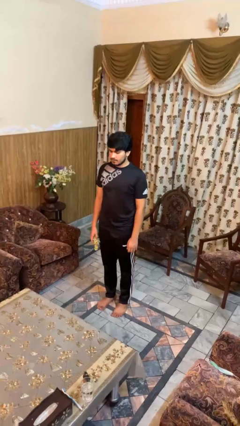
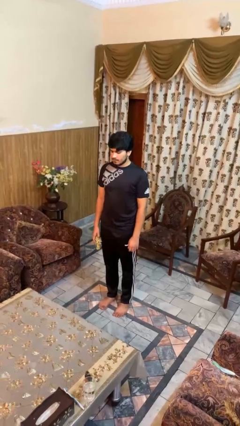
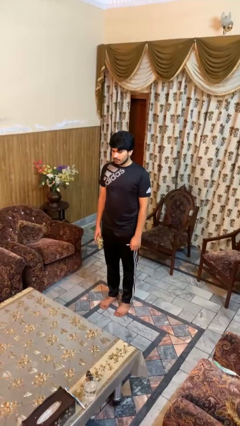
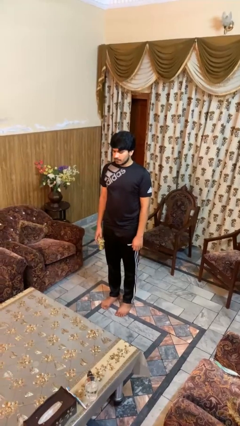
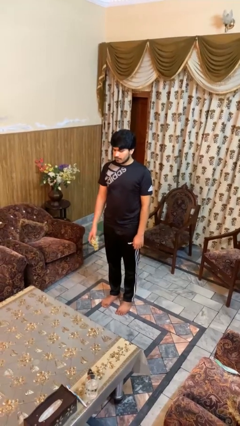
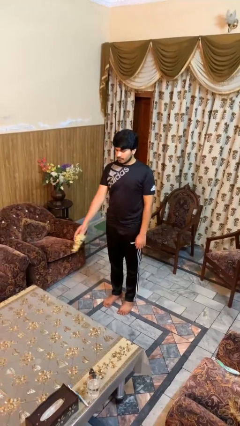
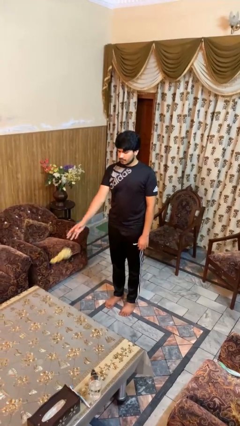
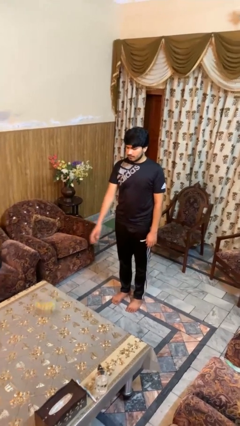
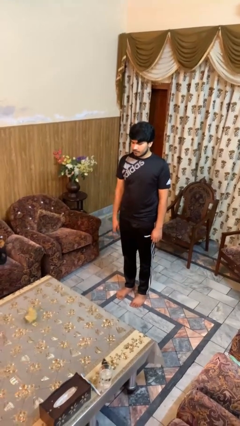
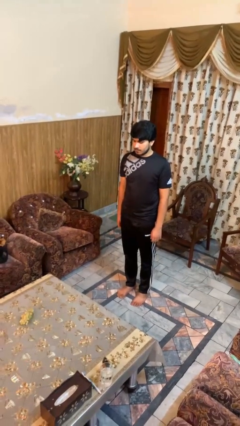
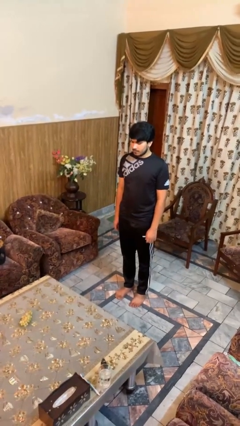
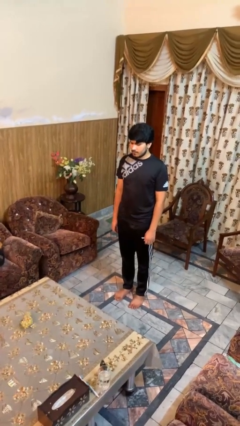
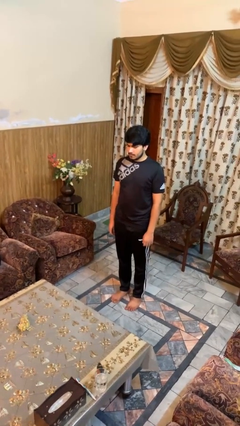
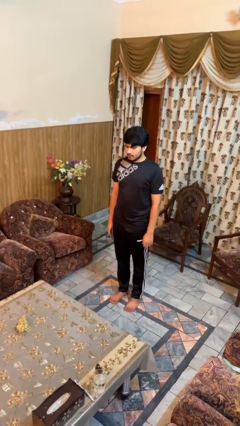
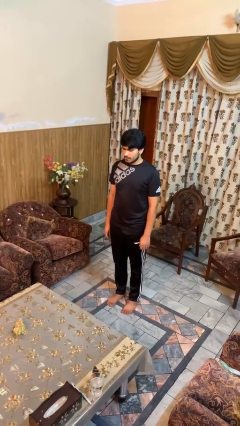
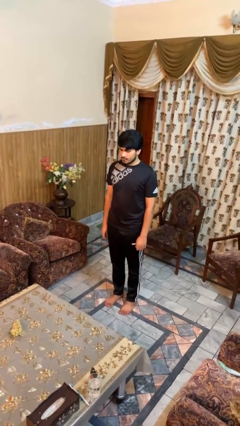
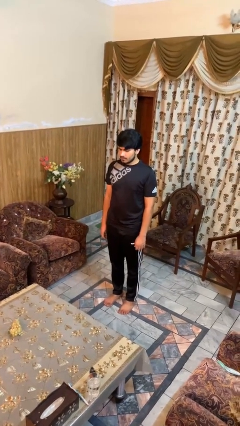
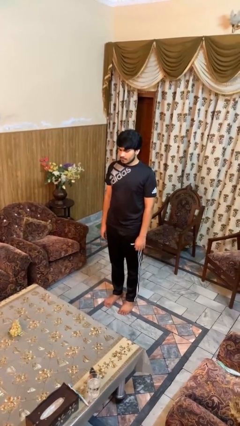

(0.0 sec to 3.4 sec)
person throws object on table

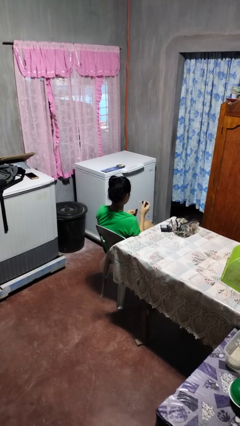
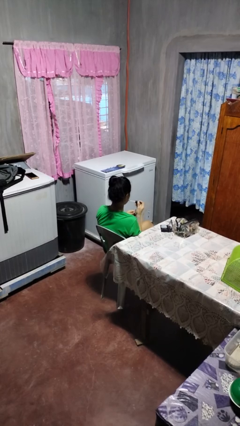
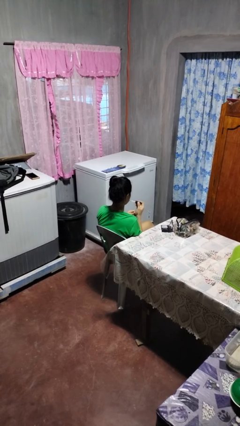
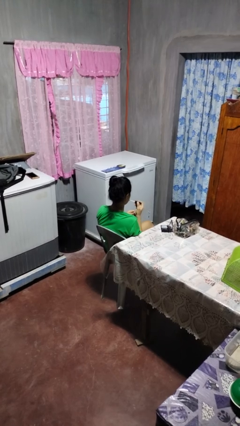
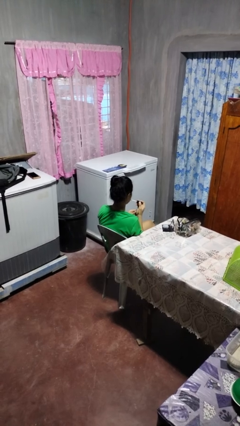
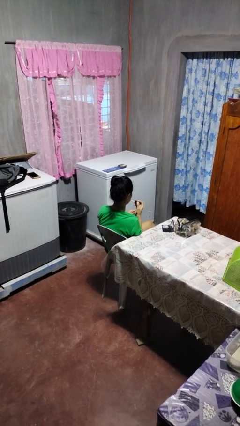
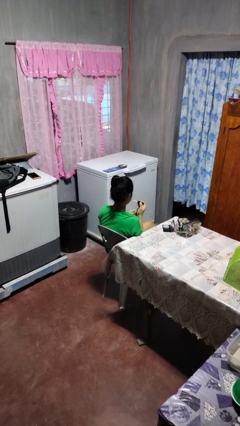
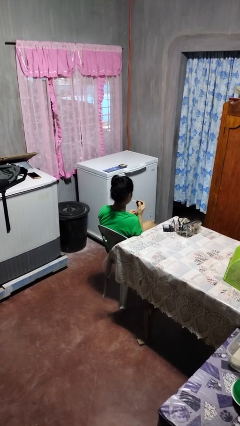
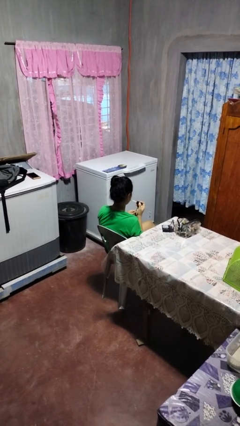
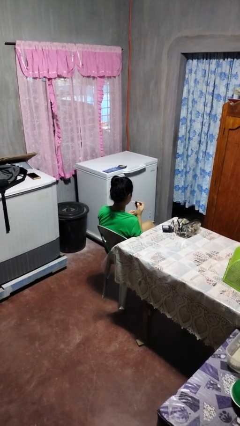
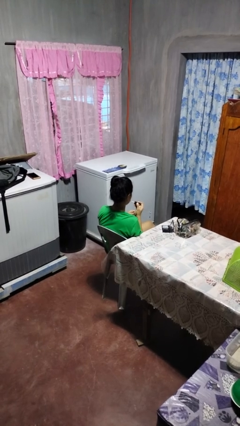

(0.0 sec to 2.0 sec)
person applies lip makeup

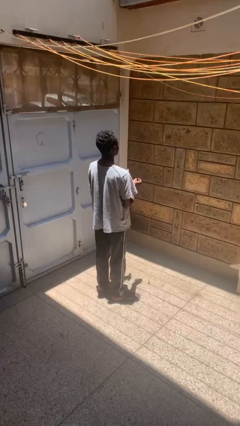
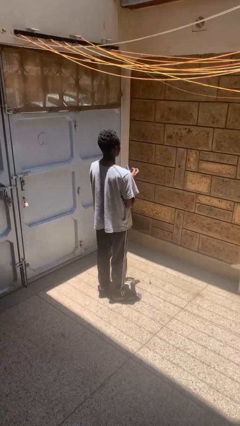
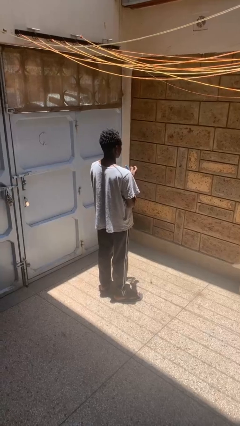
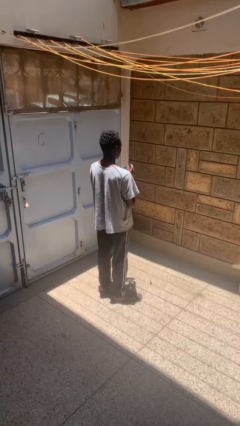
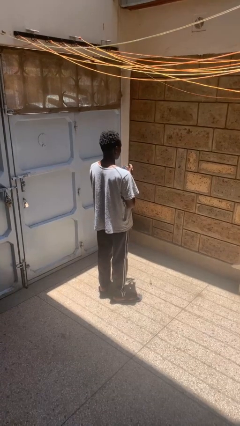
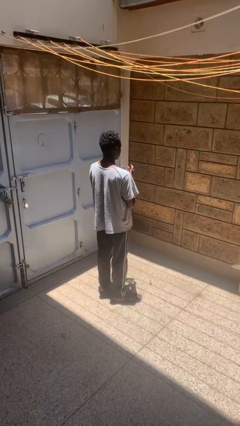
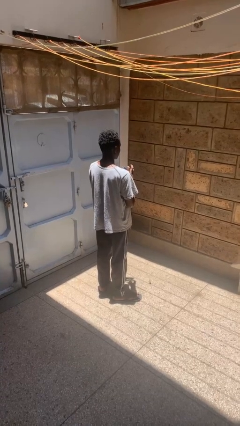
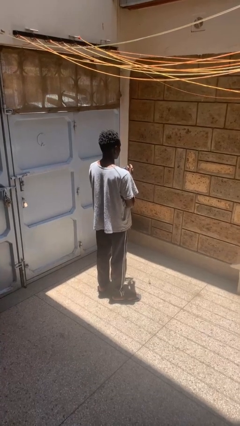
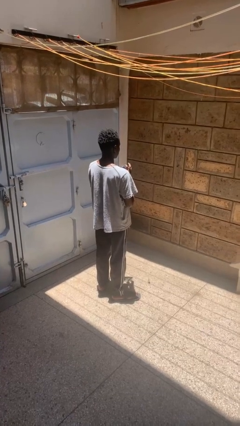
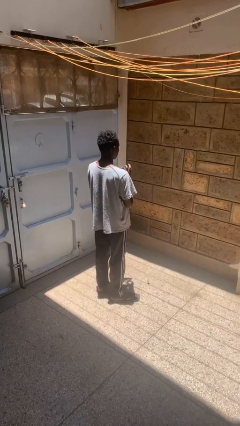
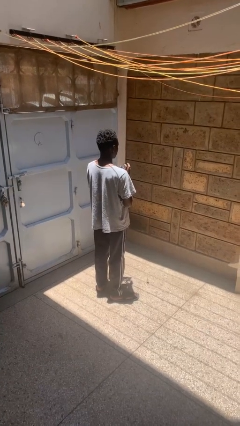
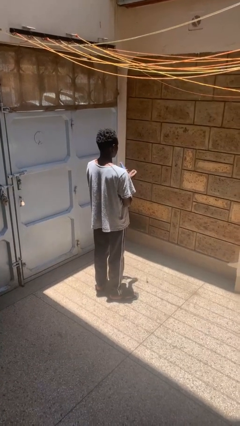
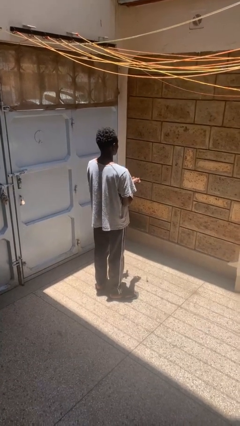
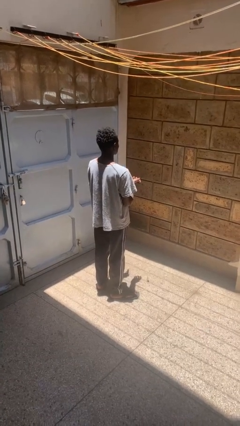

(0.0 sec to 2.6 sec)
person files fingernails

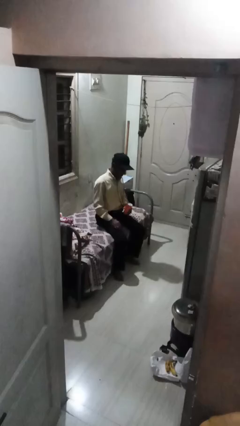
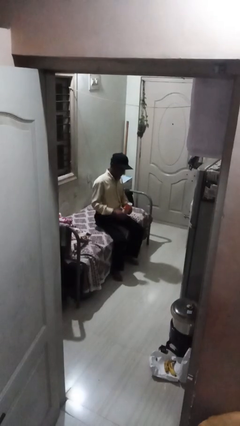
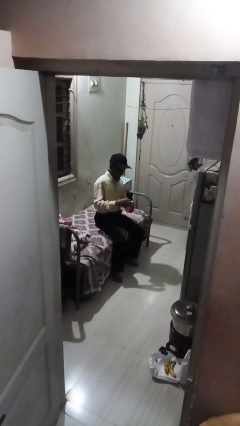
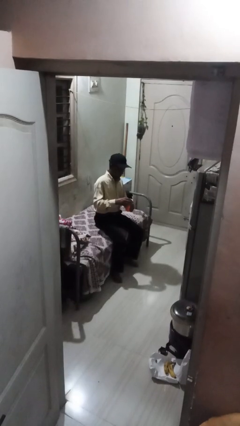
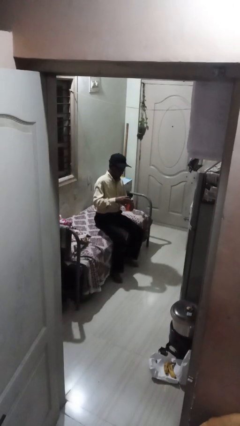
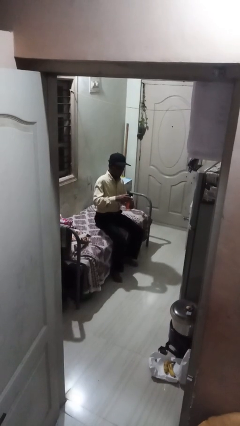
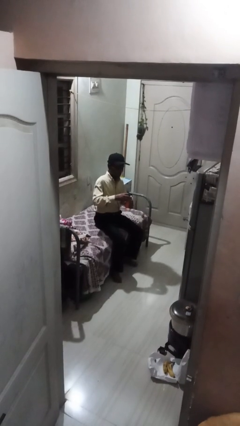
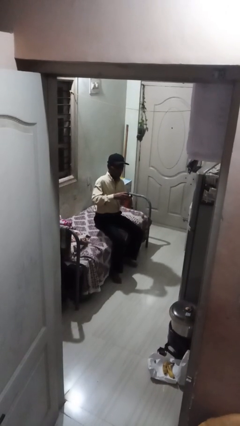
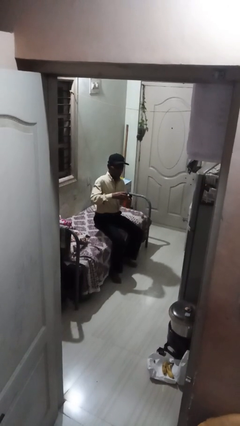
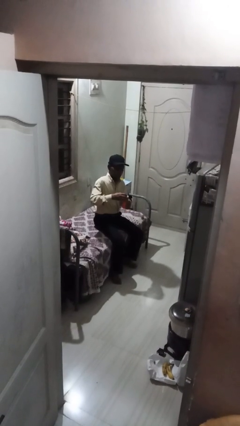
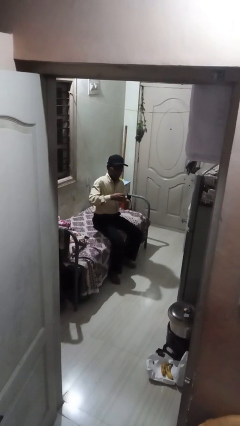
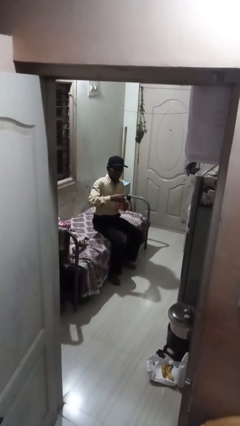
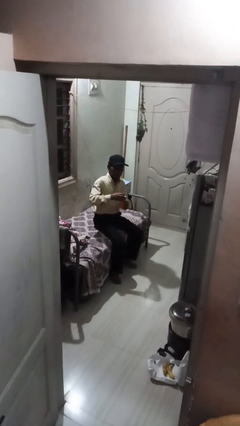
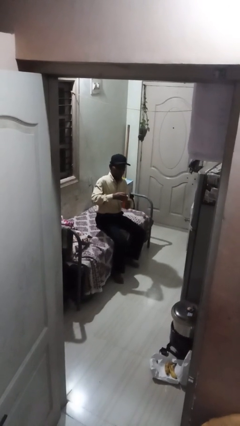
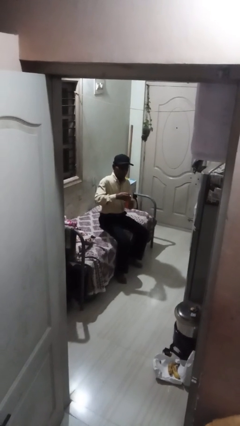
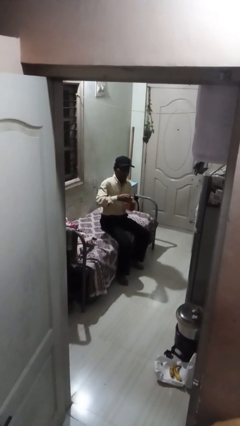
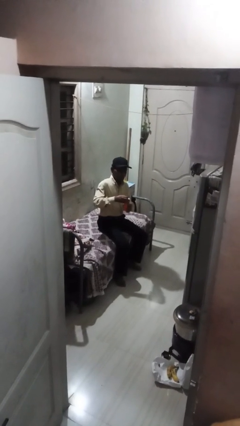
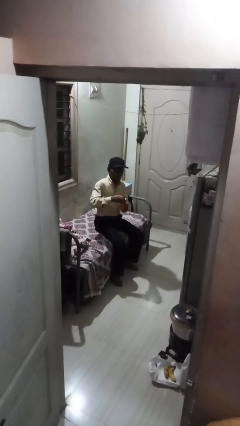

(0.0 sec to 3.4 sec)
person opens beverage can

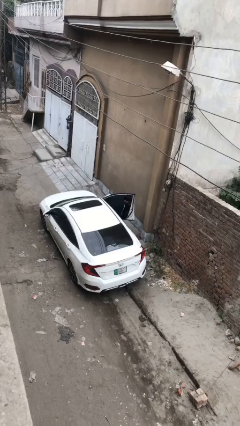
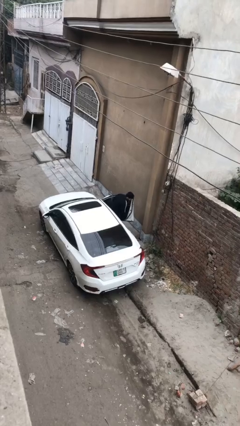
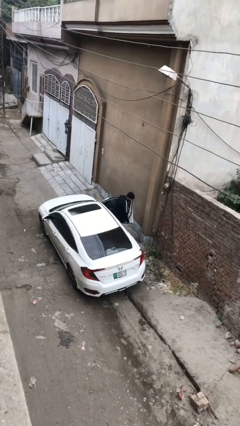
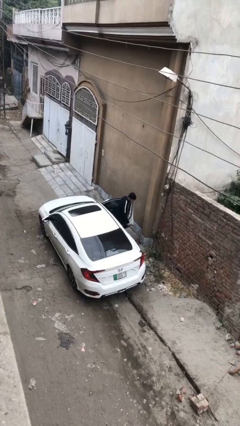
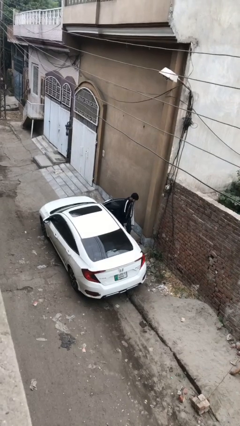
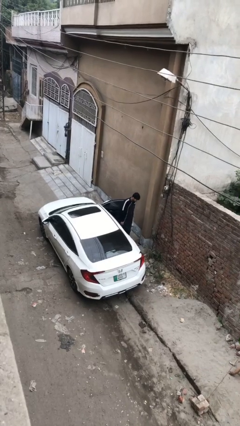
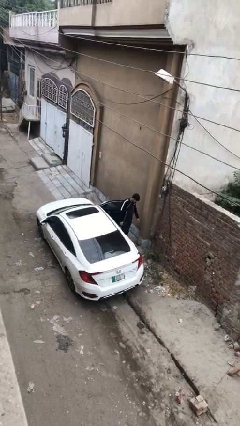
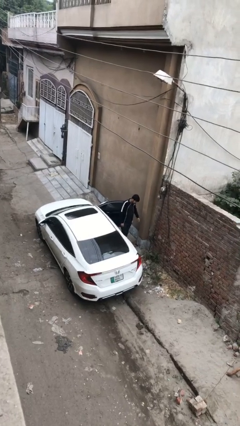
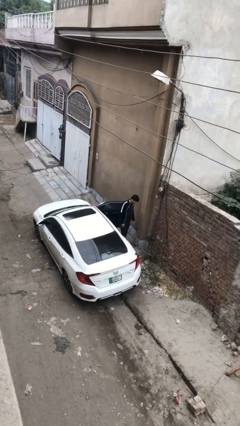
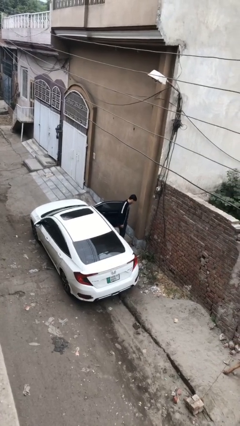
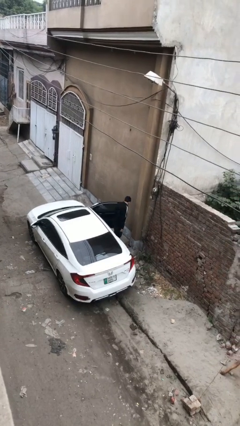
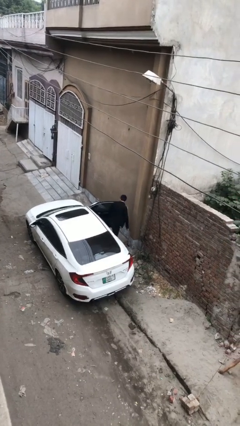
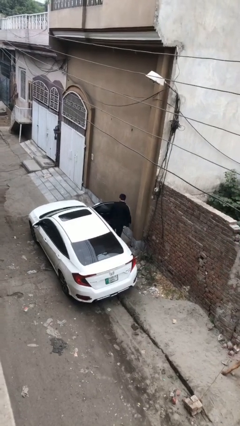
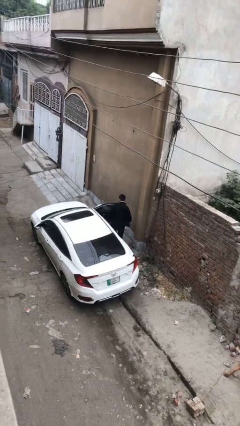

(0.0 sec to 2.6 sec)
person exits car

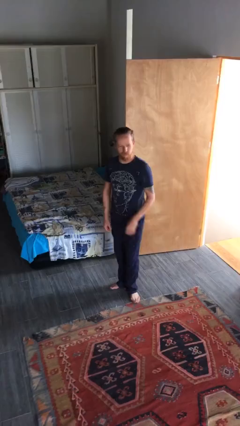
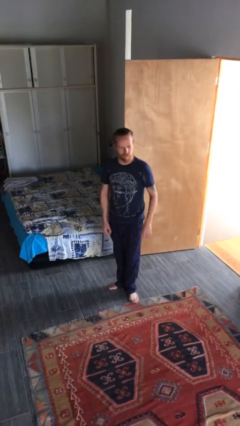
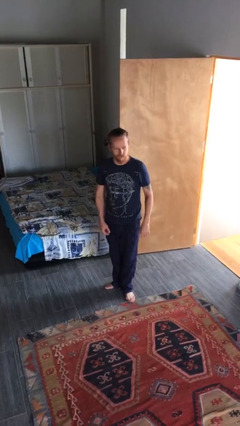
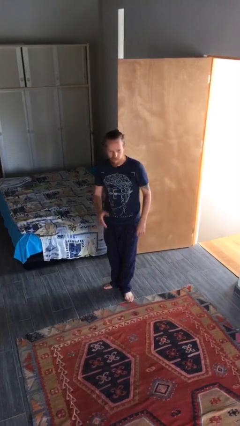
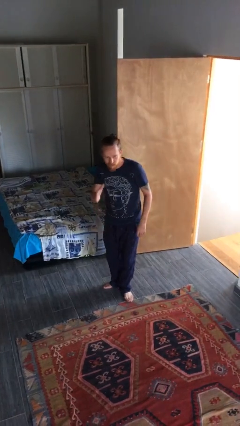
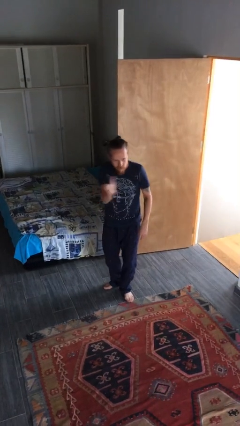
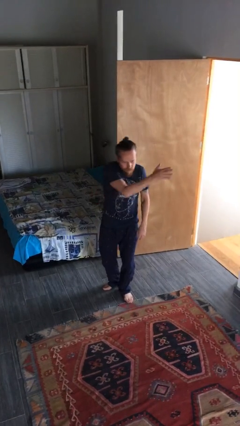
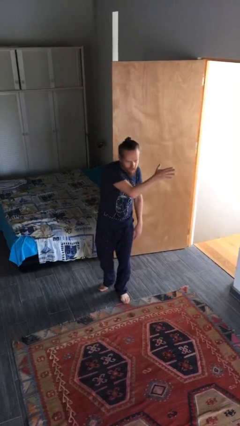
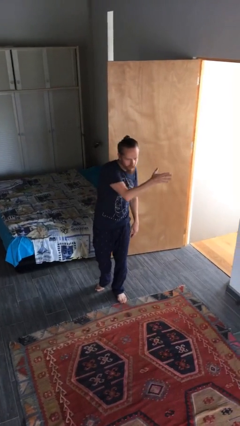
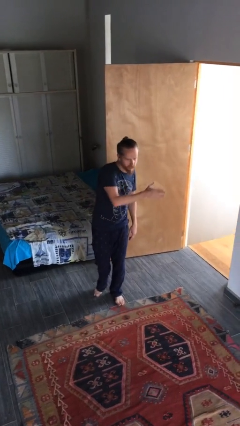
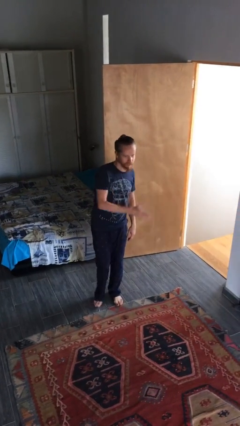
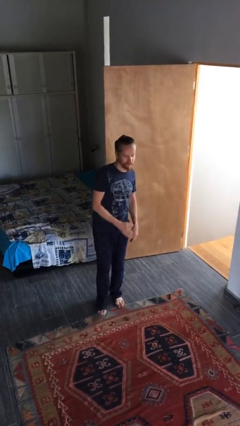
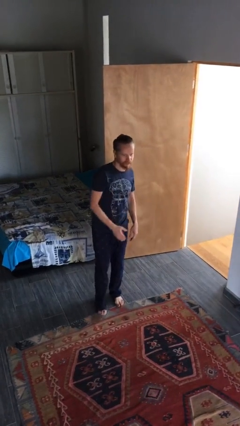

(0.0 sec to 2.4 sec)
person gestures swipe left

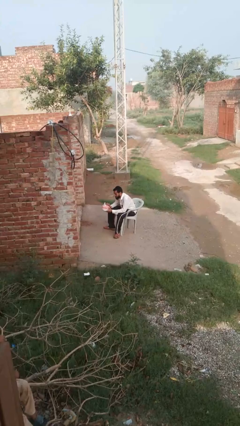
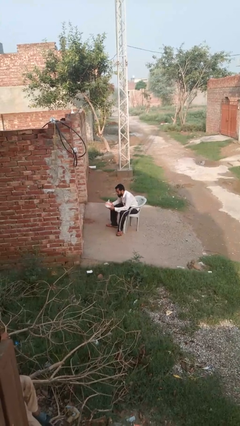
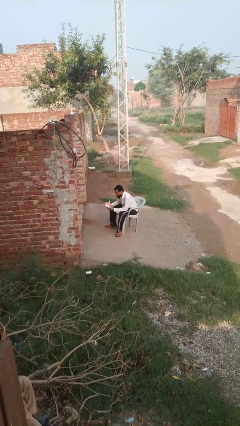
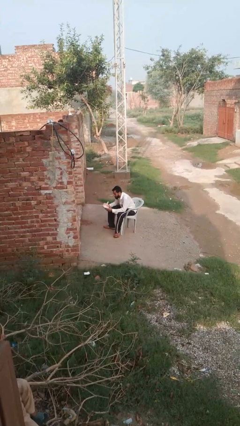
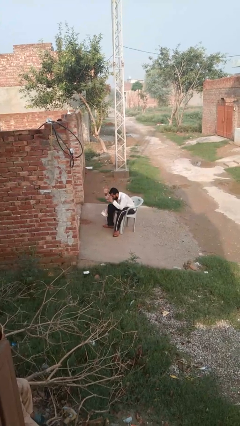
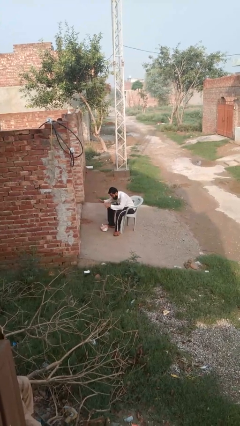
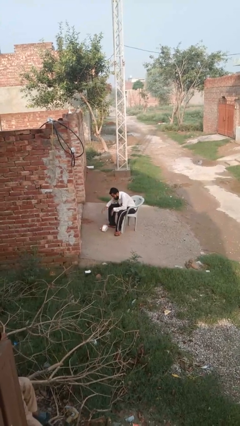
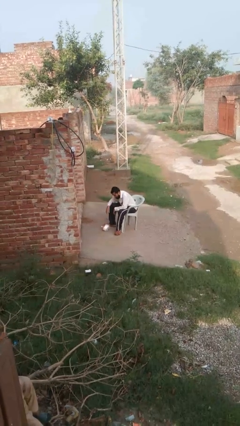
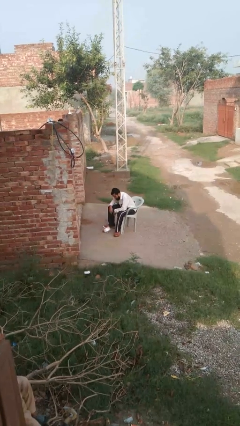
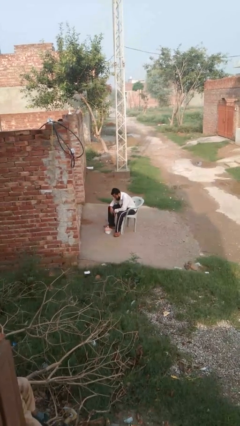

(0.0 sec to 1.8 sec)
person drops object
